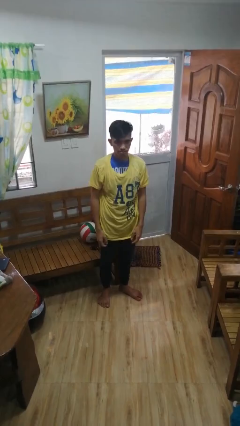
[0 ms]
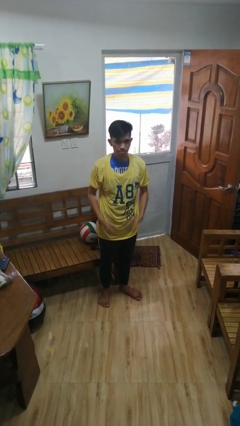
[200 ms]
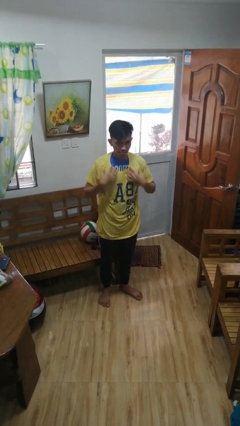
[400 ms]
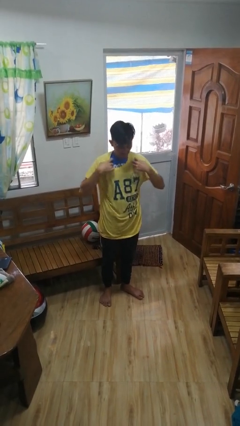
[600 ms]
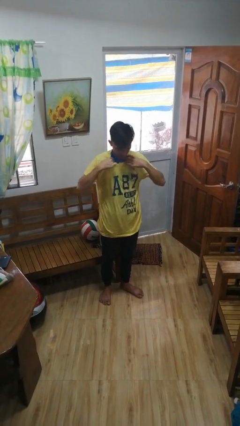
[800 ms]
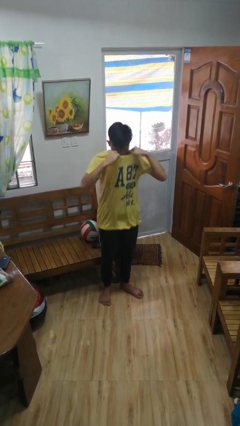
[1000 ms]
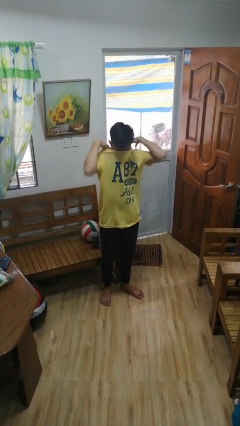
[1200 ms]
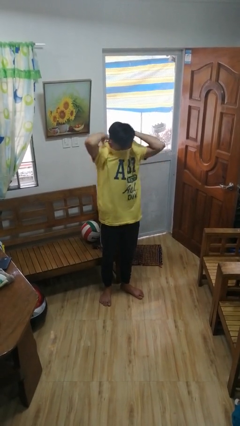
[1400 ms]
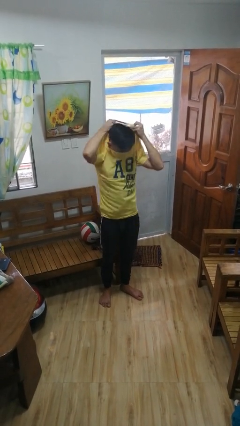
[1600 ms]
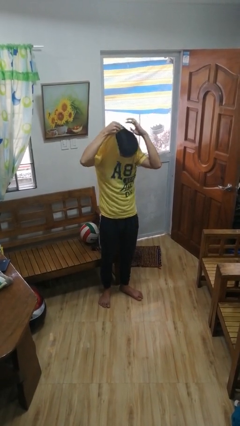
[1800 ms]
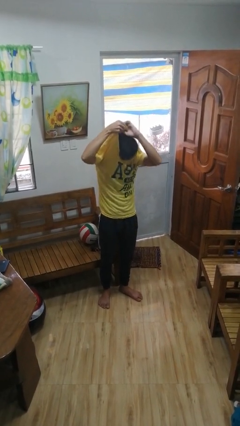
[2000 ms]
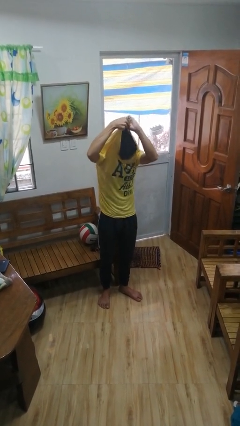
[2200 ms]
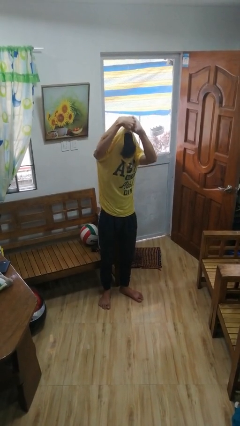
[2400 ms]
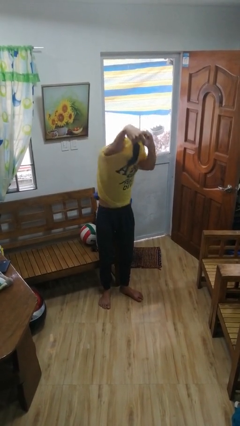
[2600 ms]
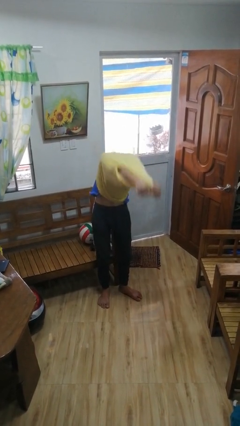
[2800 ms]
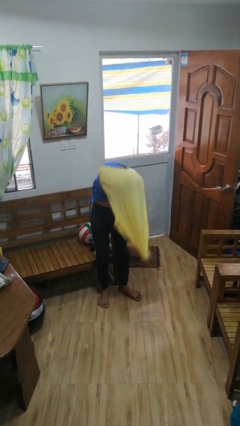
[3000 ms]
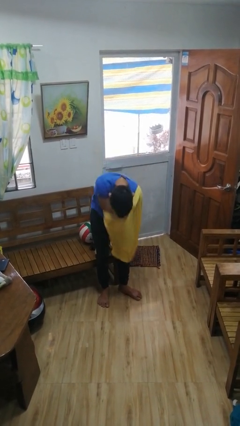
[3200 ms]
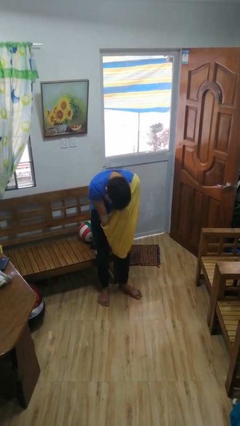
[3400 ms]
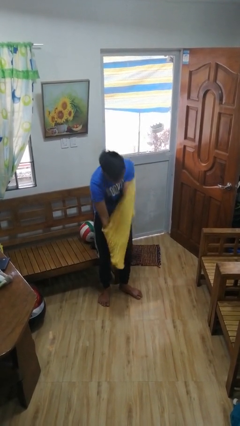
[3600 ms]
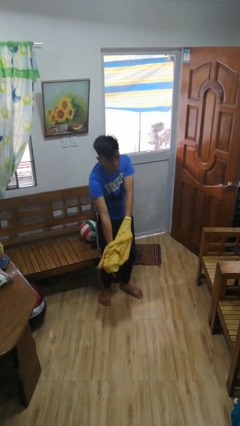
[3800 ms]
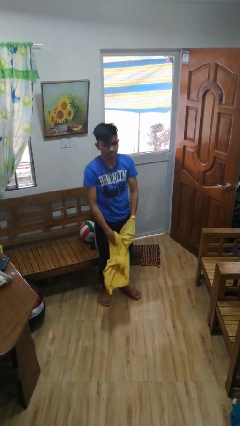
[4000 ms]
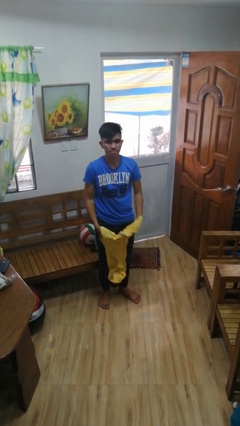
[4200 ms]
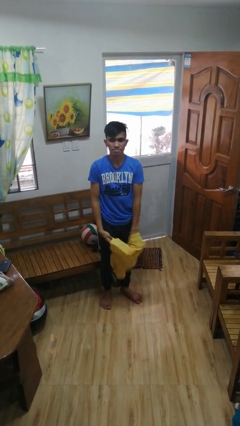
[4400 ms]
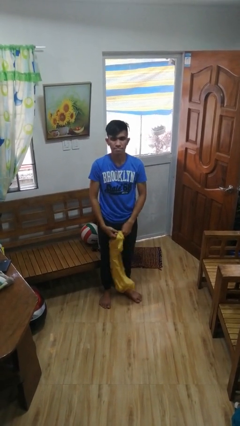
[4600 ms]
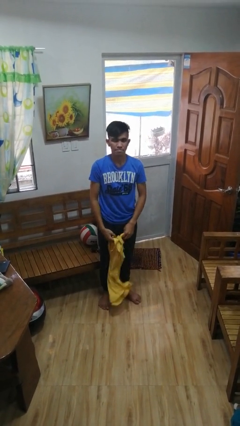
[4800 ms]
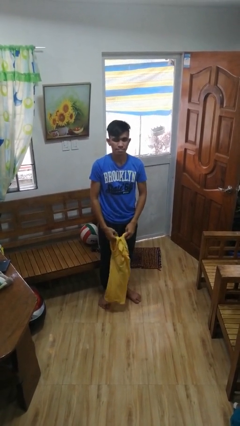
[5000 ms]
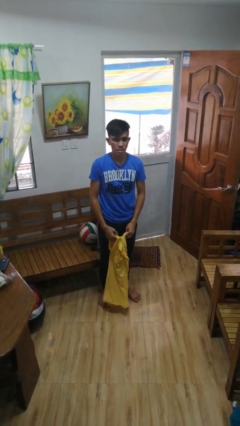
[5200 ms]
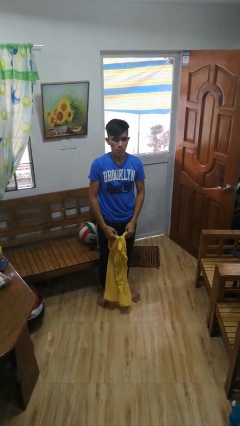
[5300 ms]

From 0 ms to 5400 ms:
person takes off shirt

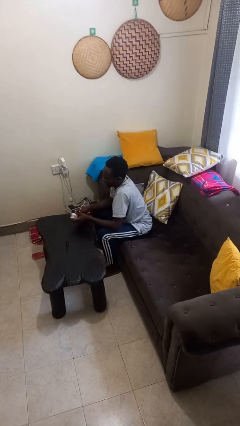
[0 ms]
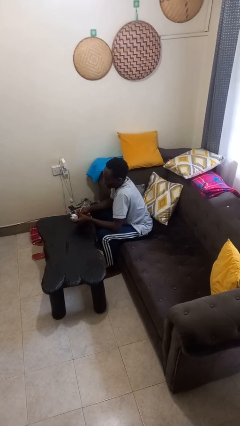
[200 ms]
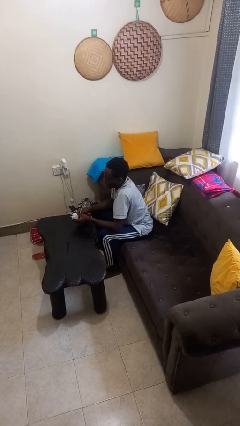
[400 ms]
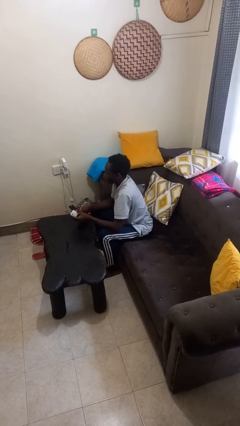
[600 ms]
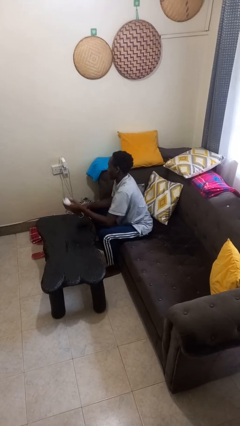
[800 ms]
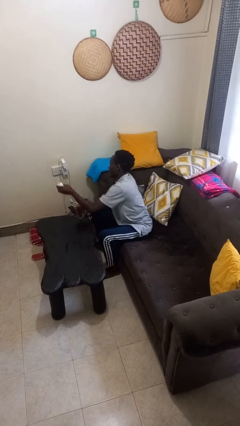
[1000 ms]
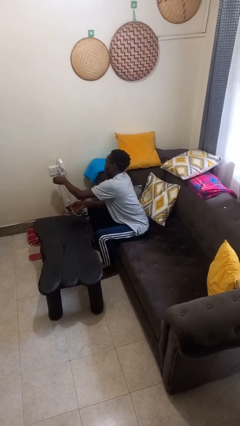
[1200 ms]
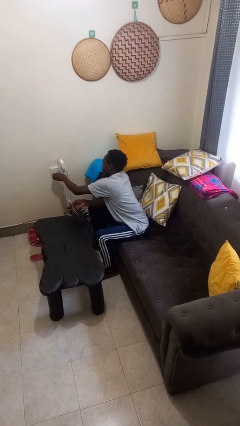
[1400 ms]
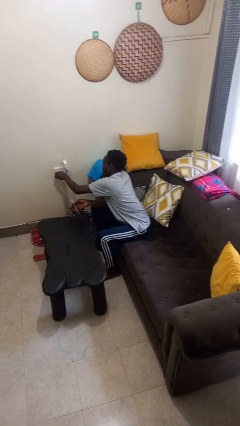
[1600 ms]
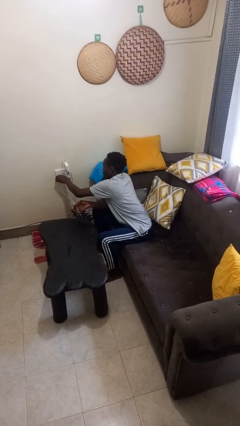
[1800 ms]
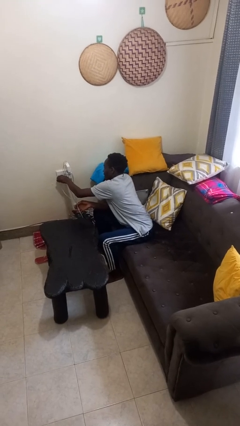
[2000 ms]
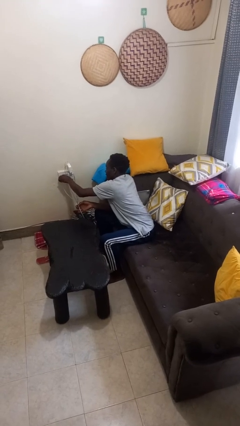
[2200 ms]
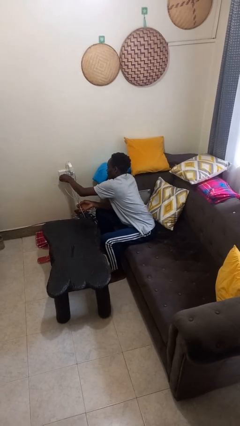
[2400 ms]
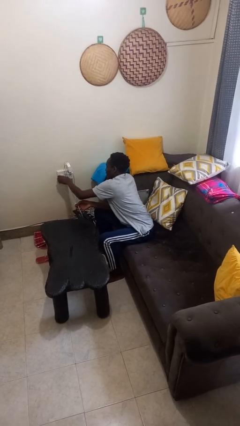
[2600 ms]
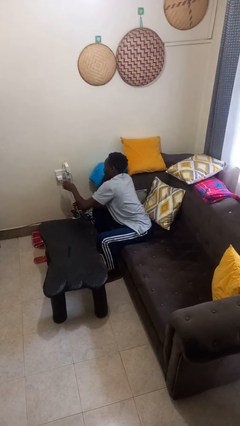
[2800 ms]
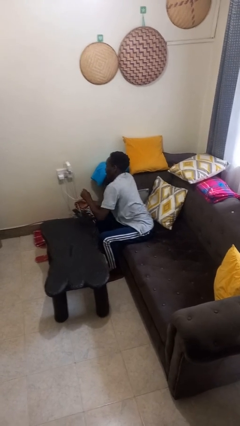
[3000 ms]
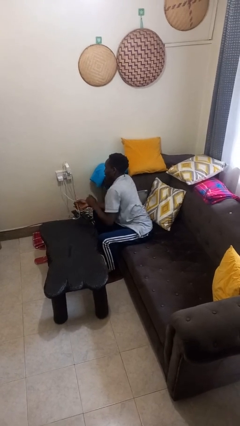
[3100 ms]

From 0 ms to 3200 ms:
person plugs into electrical socket

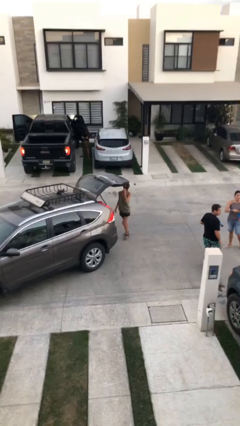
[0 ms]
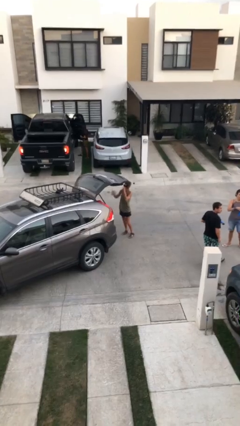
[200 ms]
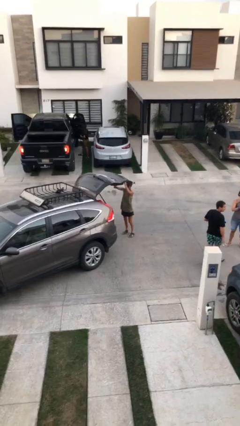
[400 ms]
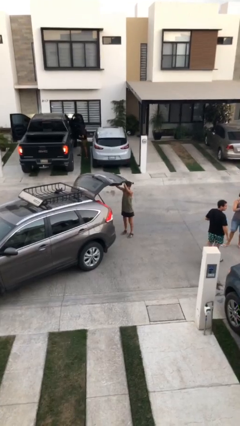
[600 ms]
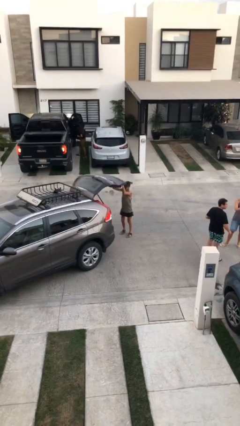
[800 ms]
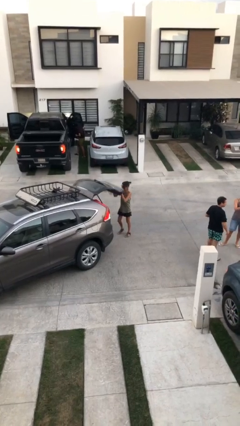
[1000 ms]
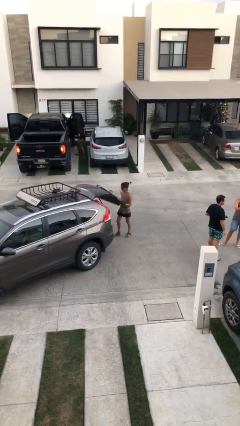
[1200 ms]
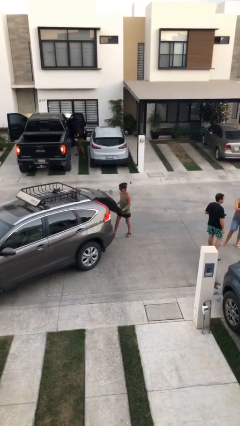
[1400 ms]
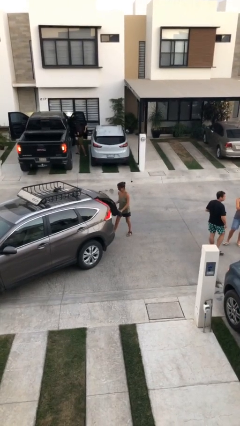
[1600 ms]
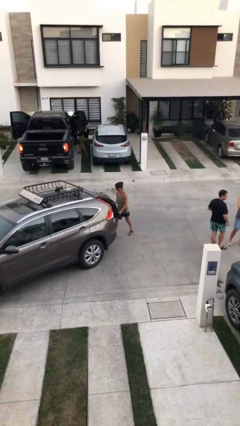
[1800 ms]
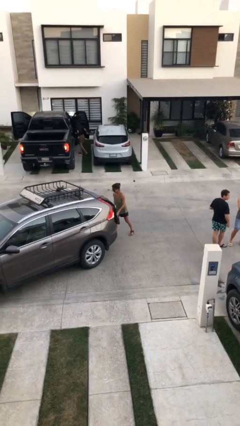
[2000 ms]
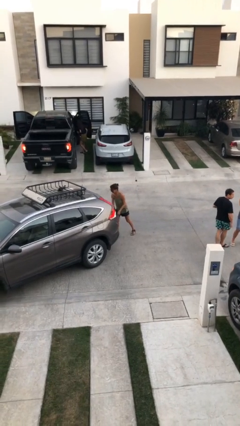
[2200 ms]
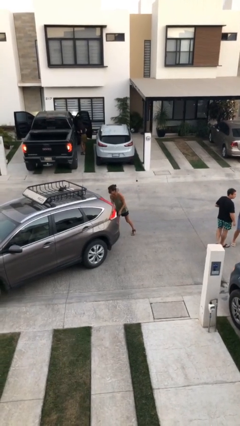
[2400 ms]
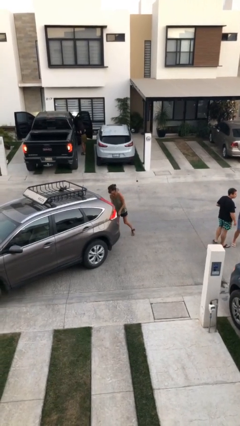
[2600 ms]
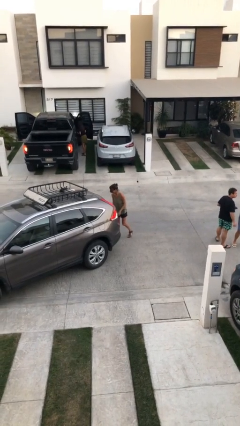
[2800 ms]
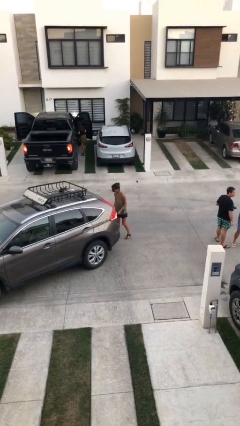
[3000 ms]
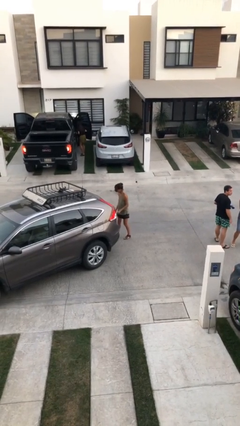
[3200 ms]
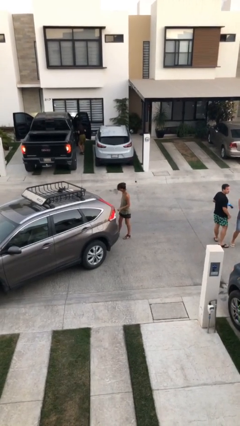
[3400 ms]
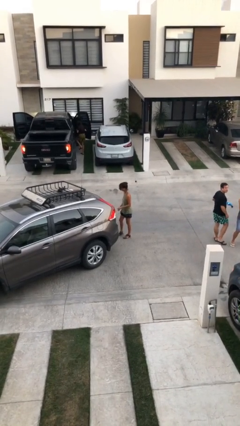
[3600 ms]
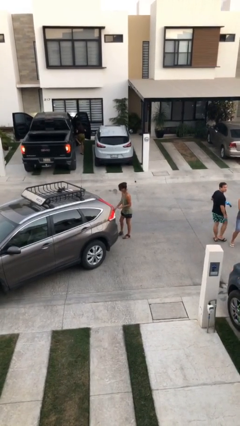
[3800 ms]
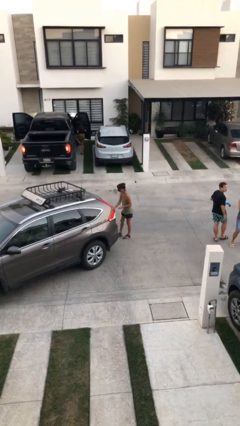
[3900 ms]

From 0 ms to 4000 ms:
person closes car trunk

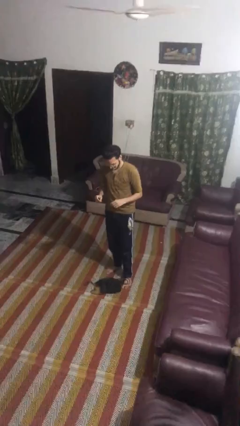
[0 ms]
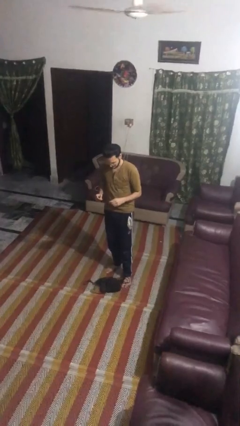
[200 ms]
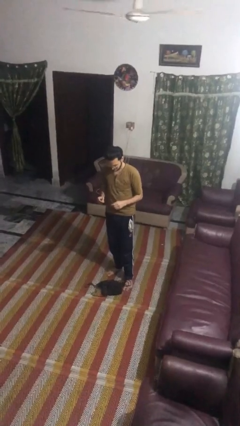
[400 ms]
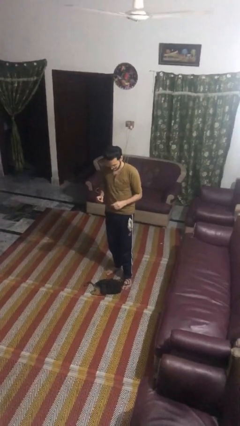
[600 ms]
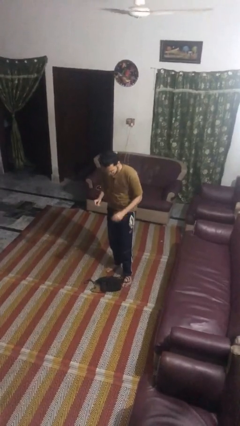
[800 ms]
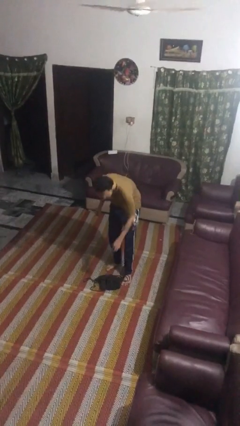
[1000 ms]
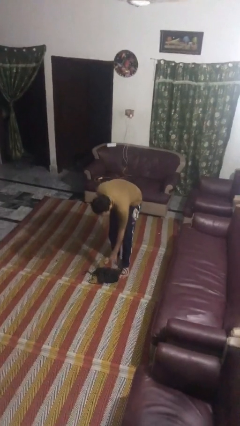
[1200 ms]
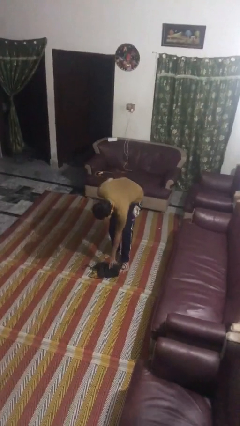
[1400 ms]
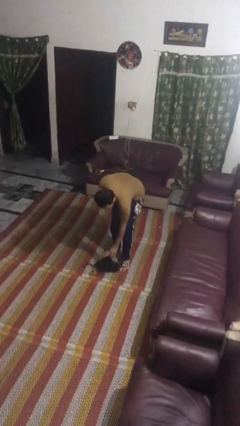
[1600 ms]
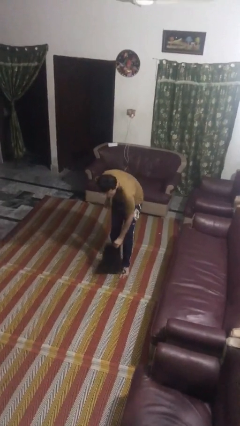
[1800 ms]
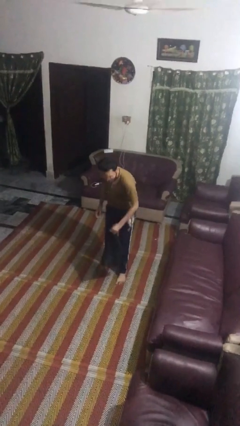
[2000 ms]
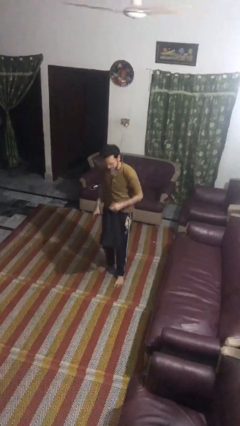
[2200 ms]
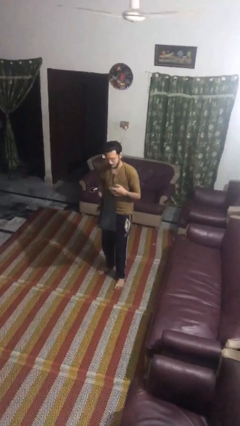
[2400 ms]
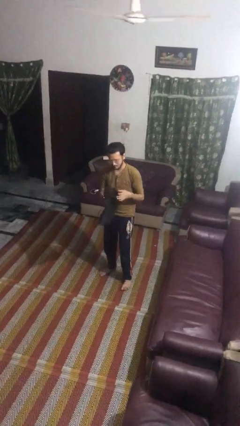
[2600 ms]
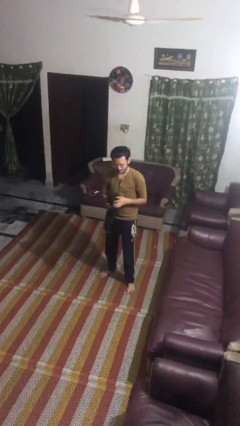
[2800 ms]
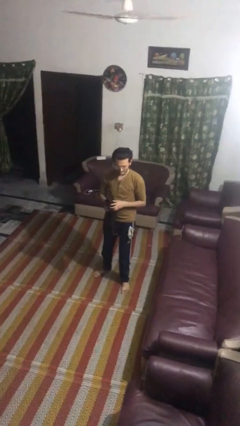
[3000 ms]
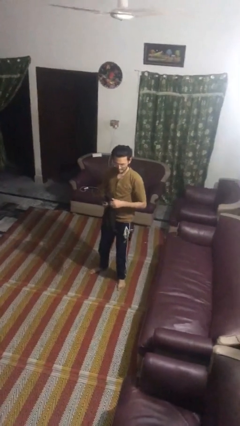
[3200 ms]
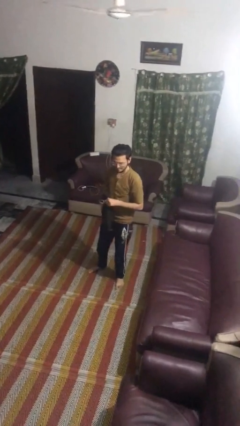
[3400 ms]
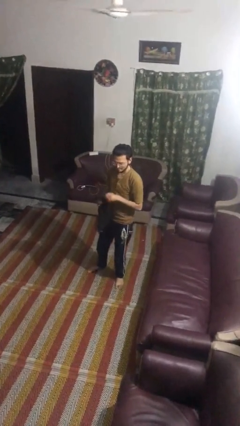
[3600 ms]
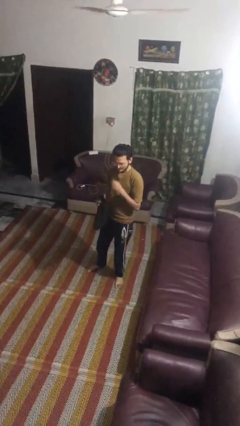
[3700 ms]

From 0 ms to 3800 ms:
person picks up object from floor

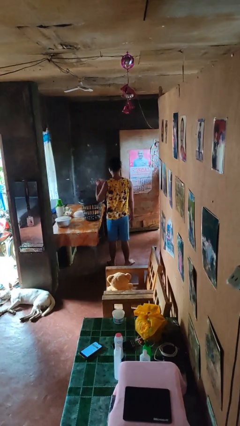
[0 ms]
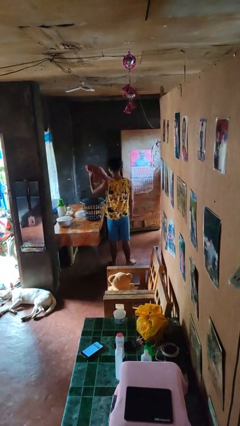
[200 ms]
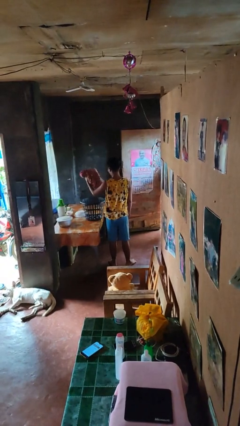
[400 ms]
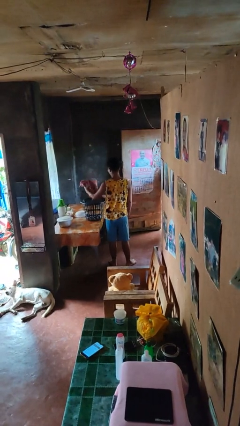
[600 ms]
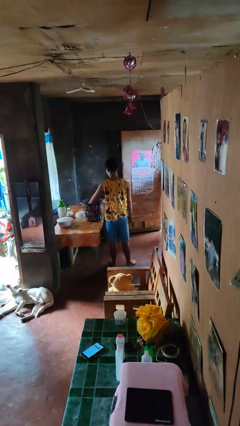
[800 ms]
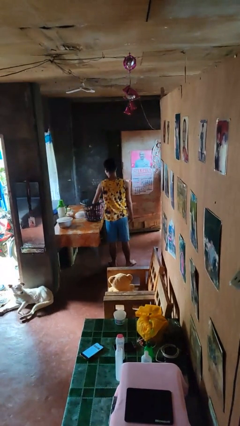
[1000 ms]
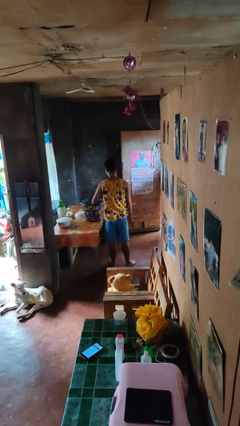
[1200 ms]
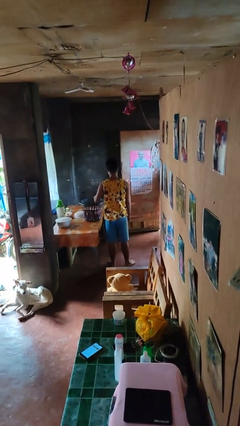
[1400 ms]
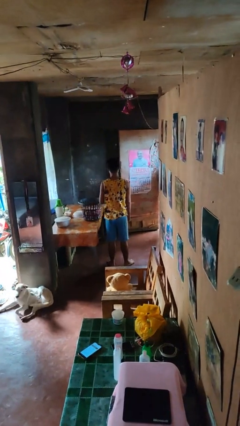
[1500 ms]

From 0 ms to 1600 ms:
person puts object into basket
